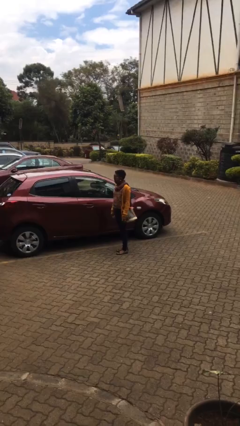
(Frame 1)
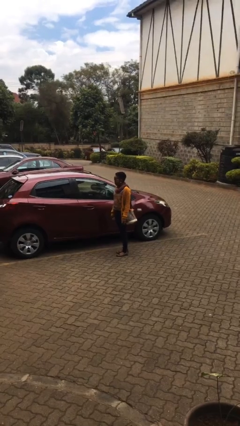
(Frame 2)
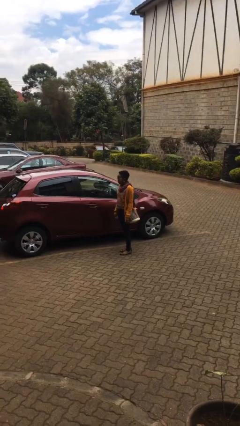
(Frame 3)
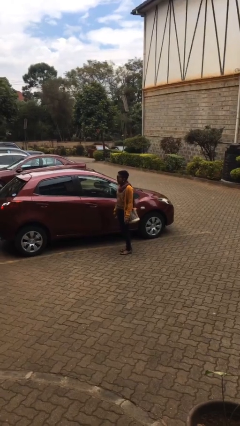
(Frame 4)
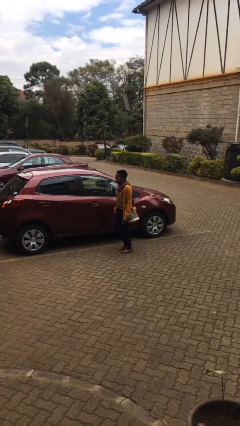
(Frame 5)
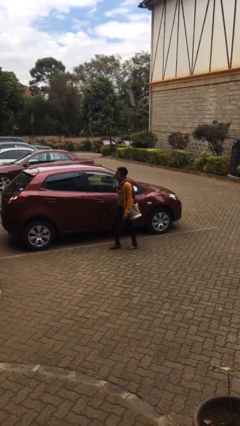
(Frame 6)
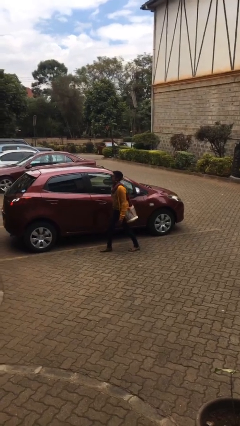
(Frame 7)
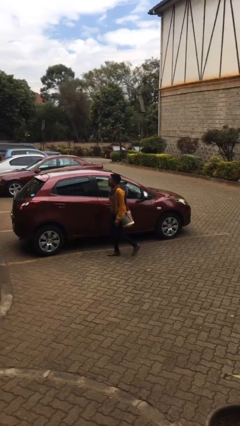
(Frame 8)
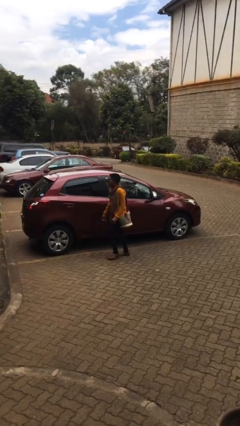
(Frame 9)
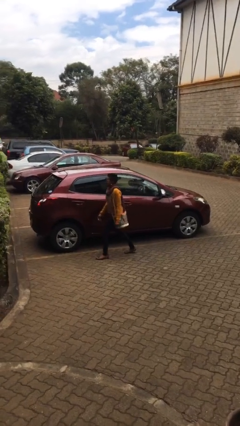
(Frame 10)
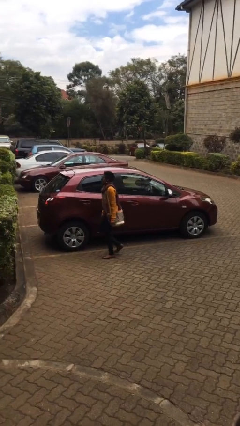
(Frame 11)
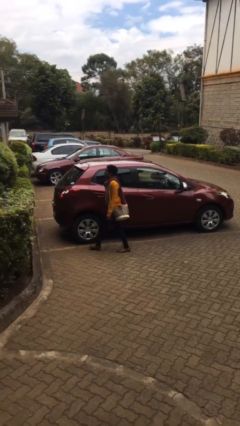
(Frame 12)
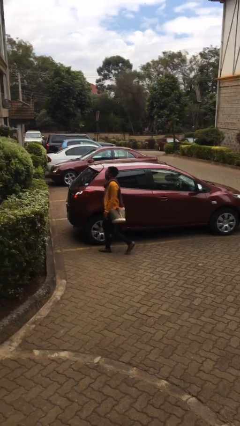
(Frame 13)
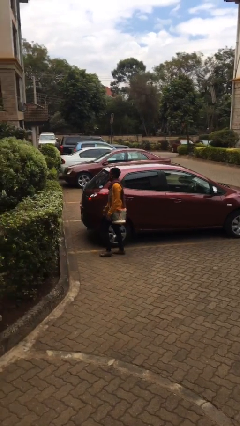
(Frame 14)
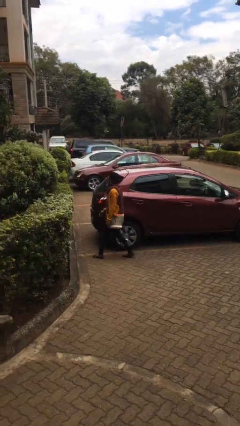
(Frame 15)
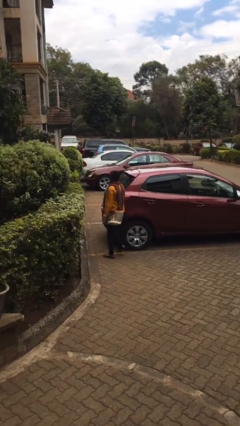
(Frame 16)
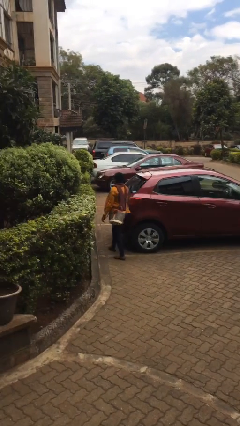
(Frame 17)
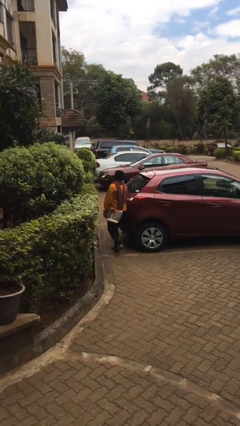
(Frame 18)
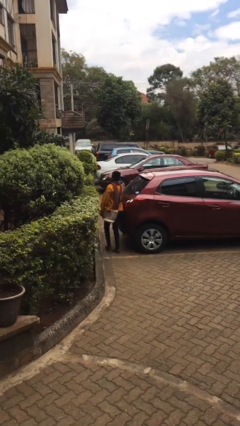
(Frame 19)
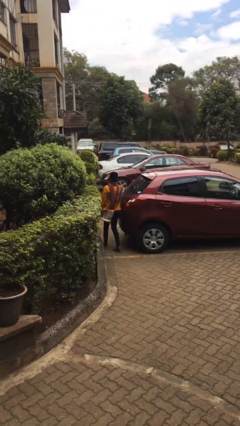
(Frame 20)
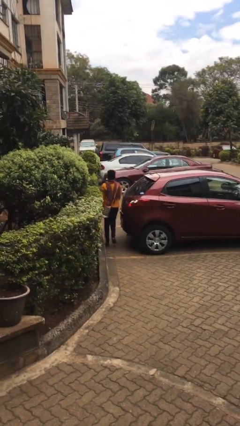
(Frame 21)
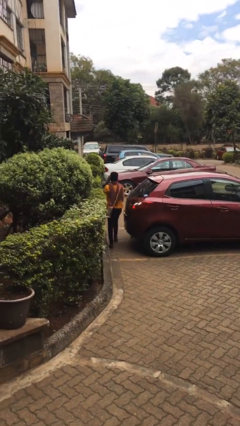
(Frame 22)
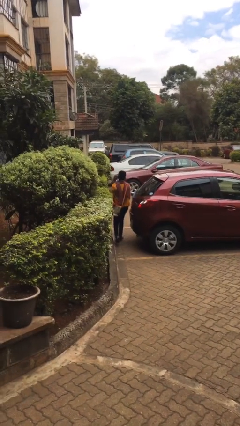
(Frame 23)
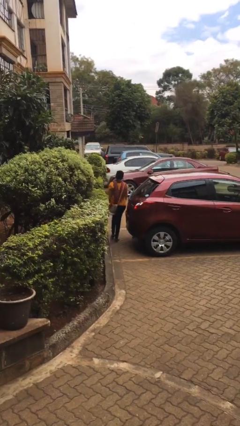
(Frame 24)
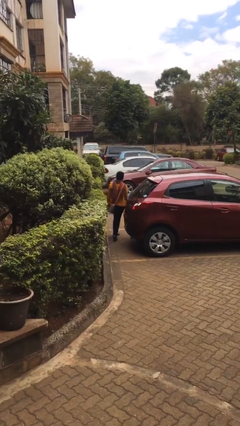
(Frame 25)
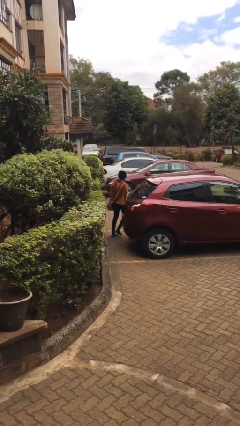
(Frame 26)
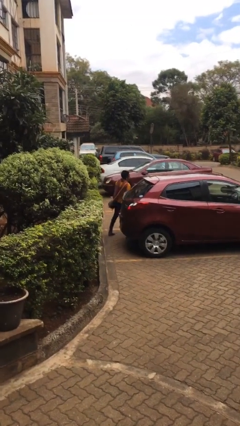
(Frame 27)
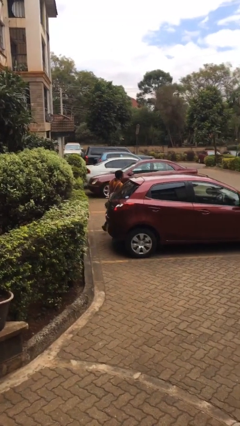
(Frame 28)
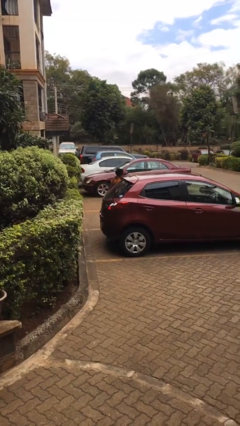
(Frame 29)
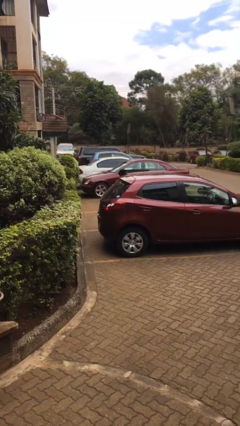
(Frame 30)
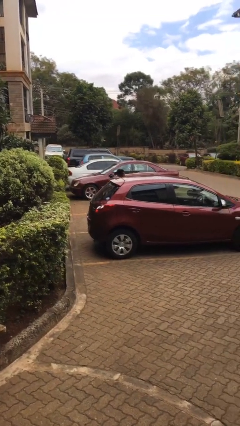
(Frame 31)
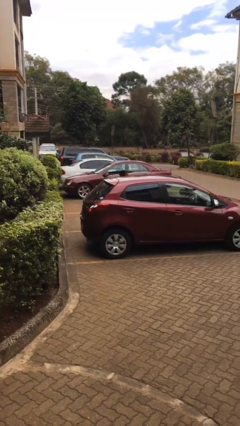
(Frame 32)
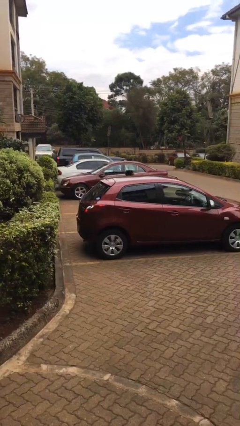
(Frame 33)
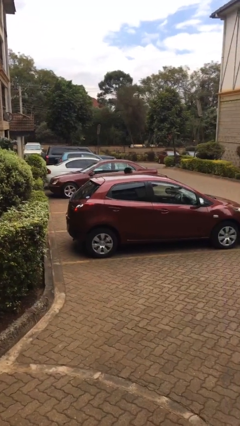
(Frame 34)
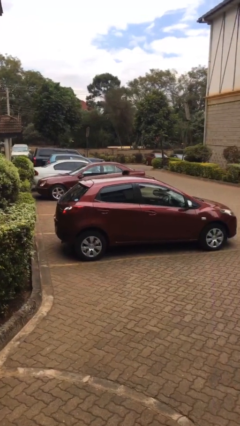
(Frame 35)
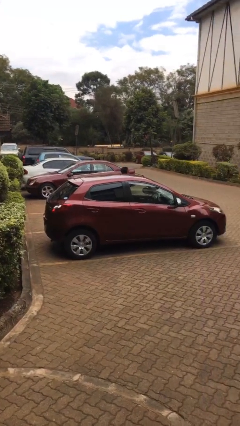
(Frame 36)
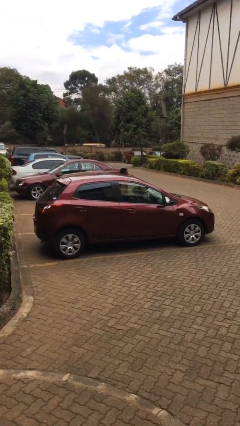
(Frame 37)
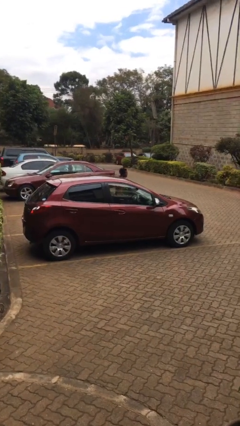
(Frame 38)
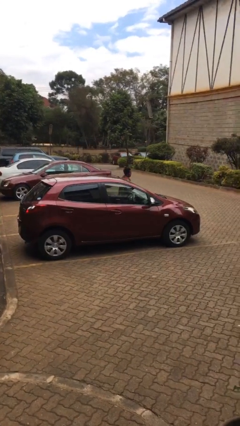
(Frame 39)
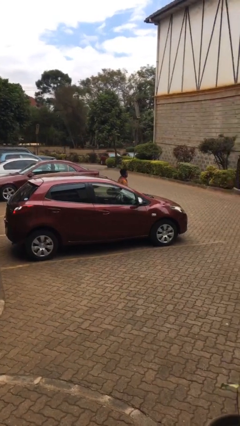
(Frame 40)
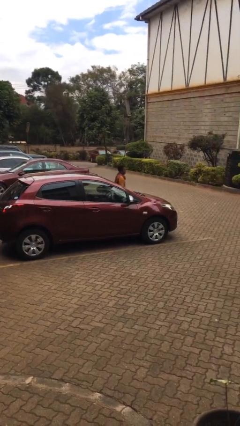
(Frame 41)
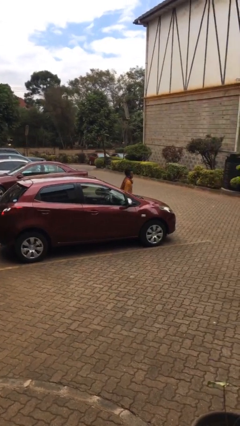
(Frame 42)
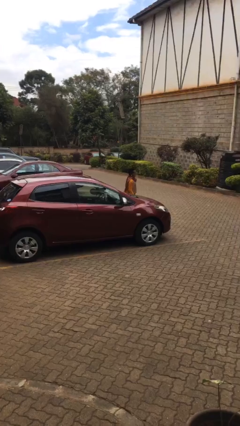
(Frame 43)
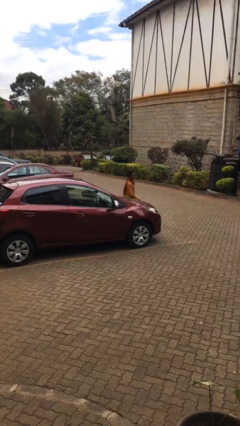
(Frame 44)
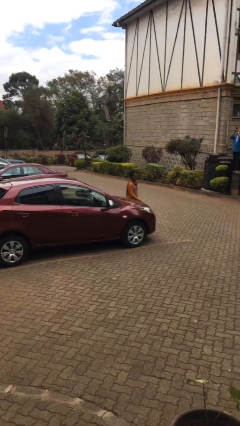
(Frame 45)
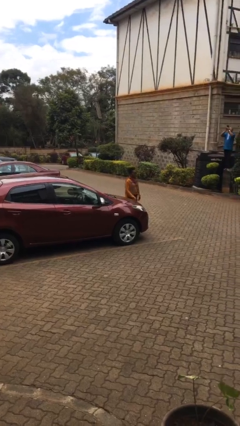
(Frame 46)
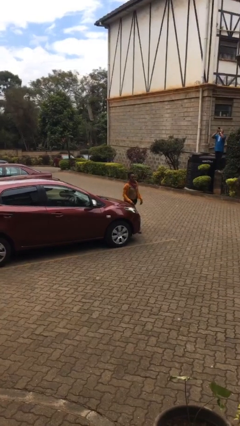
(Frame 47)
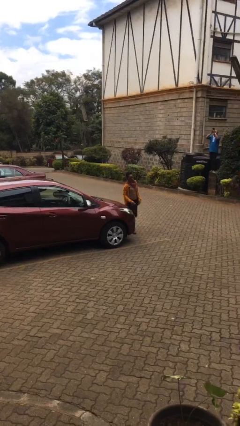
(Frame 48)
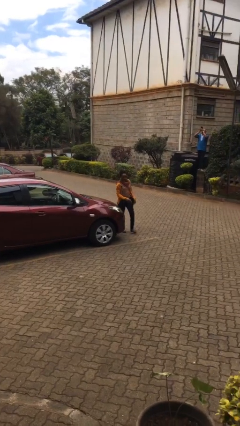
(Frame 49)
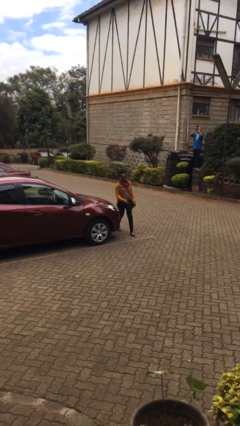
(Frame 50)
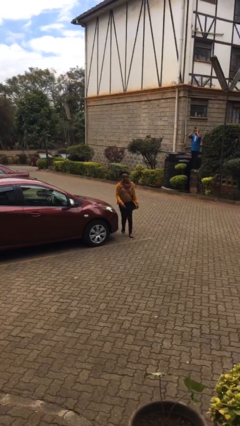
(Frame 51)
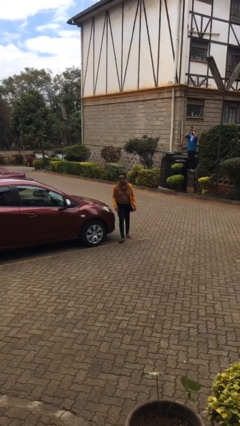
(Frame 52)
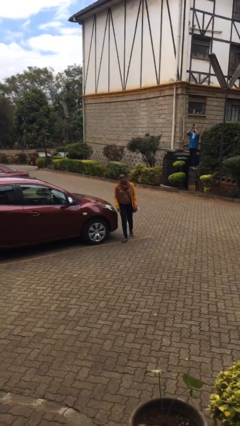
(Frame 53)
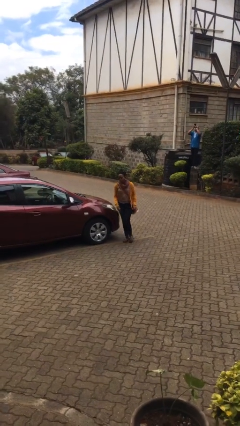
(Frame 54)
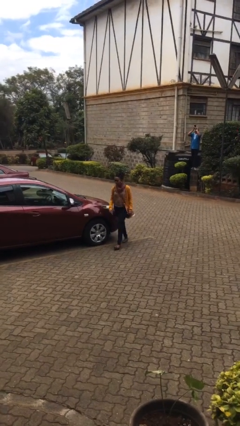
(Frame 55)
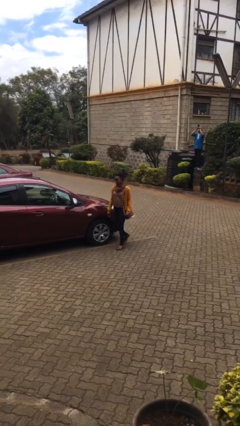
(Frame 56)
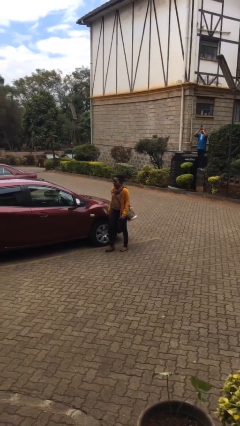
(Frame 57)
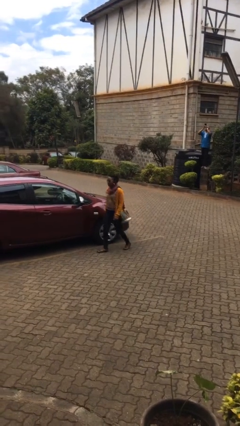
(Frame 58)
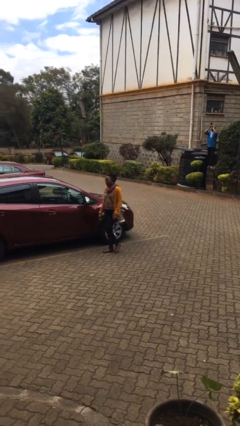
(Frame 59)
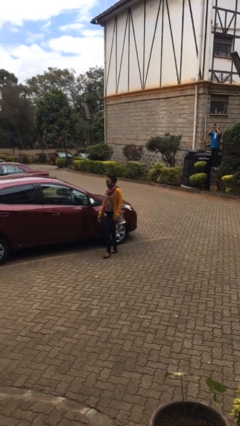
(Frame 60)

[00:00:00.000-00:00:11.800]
person walks around car

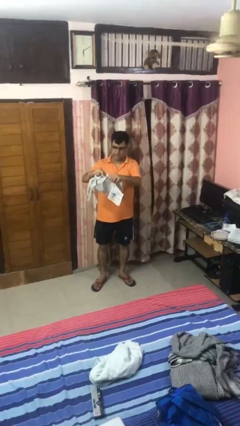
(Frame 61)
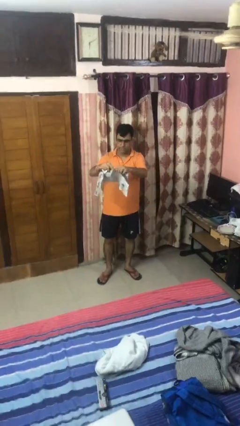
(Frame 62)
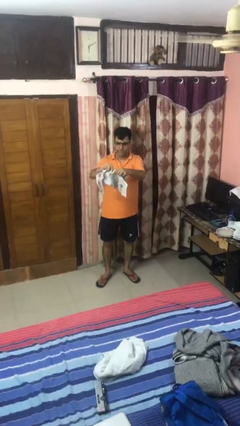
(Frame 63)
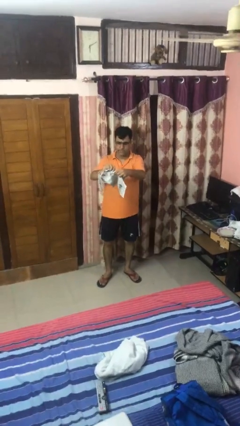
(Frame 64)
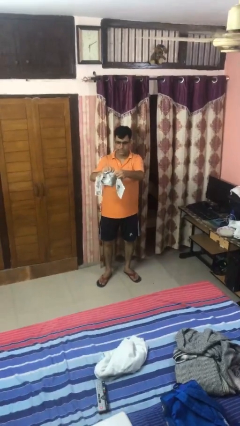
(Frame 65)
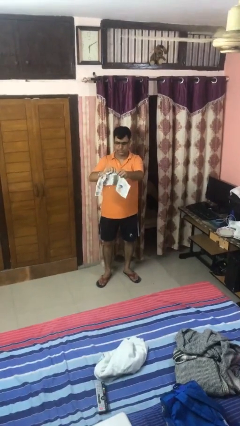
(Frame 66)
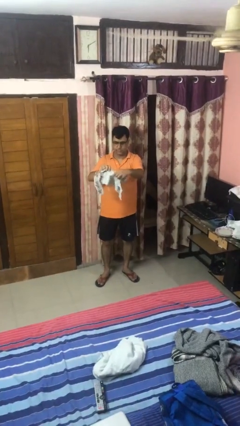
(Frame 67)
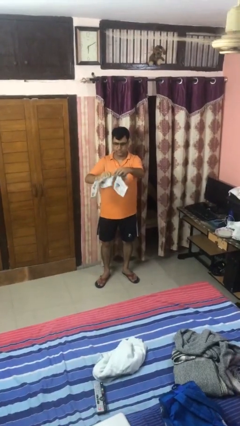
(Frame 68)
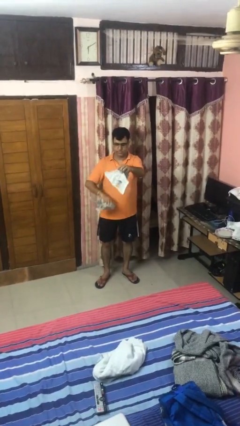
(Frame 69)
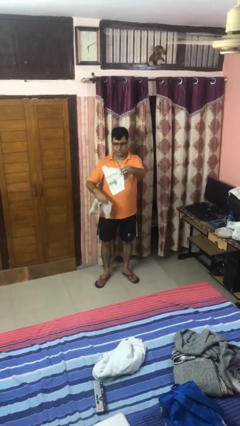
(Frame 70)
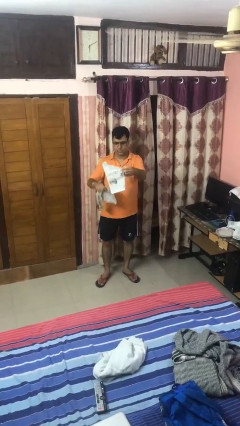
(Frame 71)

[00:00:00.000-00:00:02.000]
person tears paper

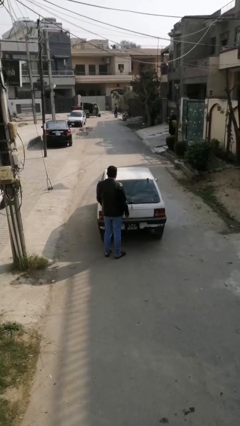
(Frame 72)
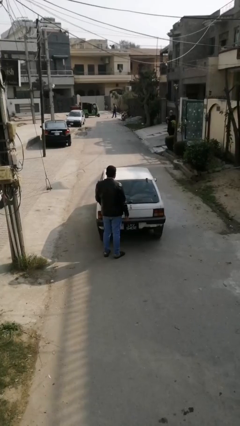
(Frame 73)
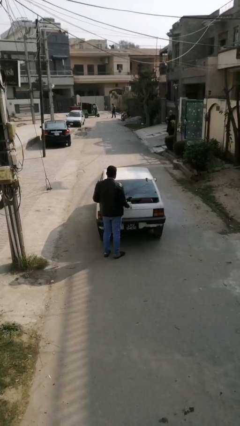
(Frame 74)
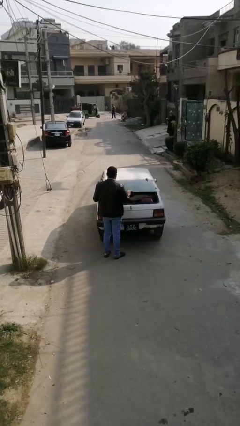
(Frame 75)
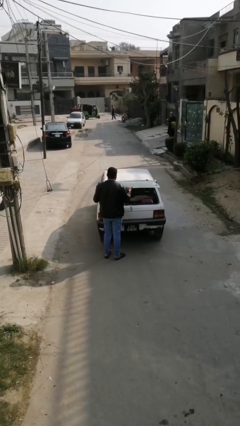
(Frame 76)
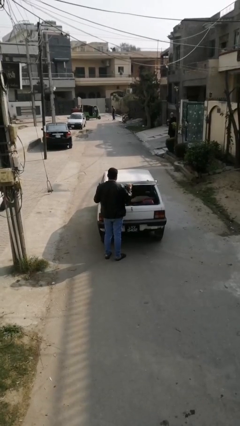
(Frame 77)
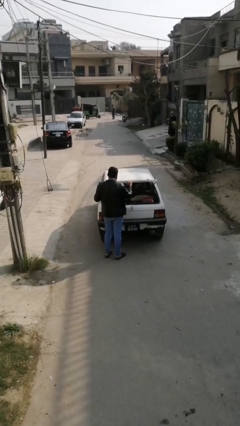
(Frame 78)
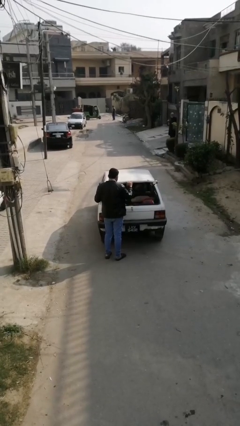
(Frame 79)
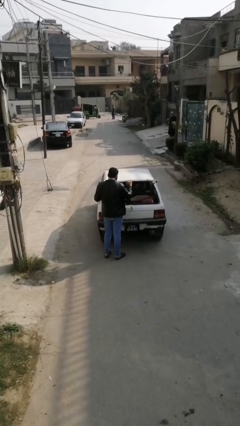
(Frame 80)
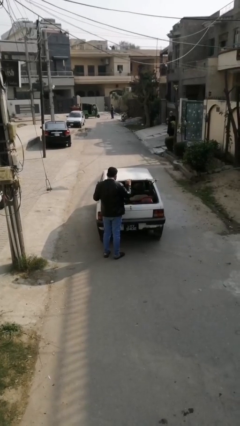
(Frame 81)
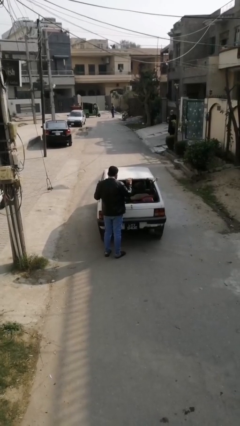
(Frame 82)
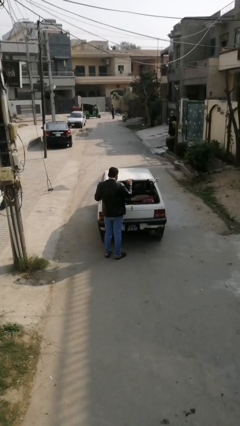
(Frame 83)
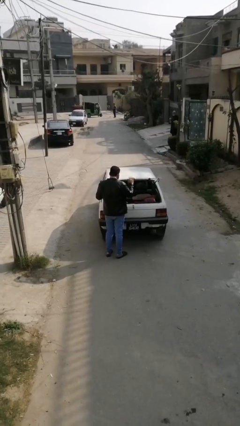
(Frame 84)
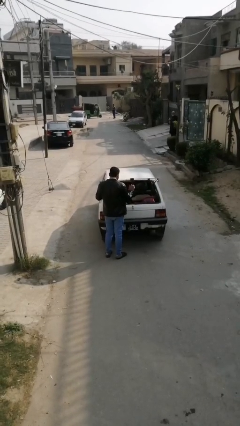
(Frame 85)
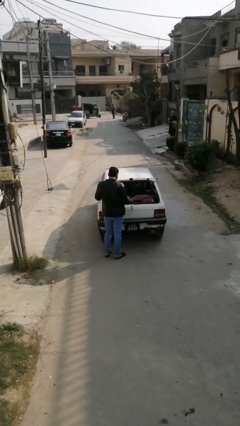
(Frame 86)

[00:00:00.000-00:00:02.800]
person opens car trunk

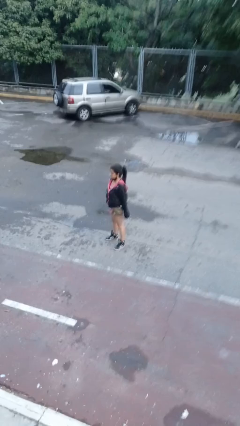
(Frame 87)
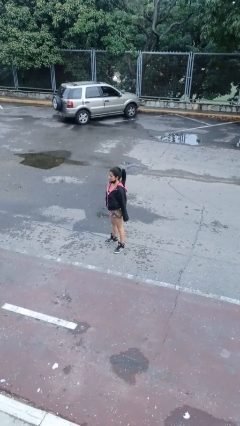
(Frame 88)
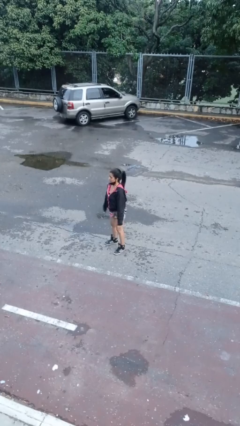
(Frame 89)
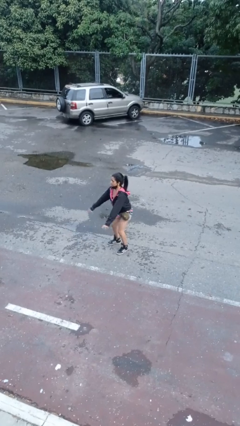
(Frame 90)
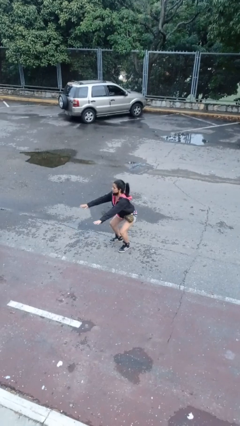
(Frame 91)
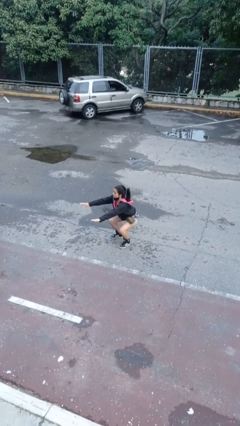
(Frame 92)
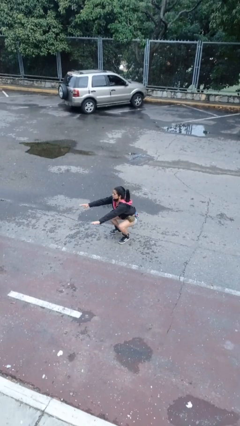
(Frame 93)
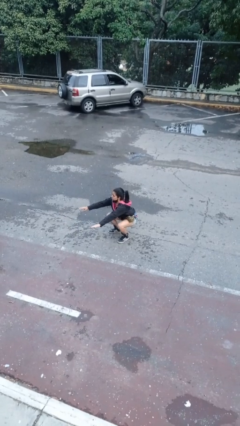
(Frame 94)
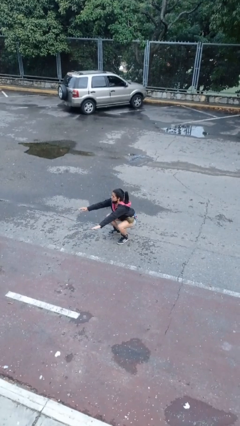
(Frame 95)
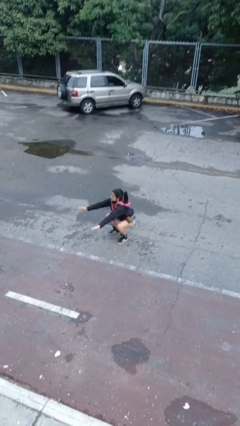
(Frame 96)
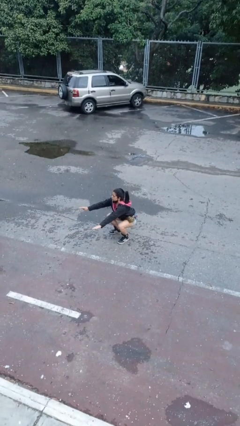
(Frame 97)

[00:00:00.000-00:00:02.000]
person squats
